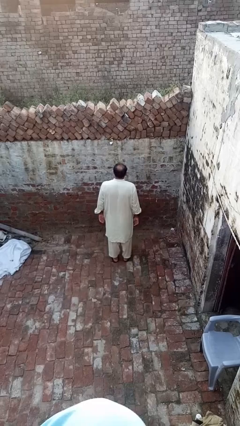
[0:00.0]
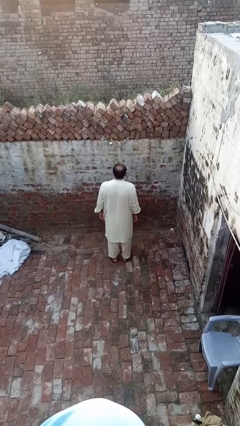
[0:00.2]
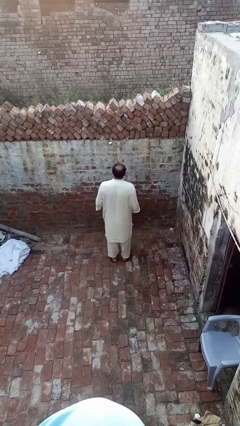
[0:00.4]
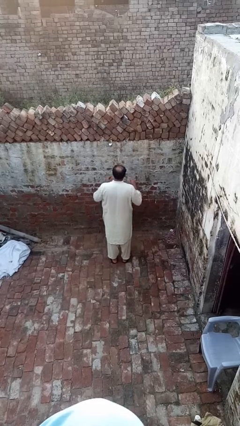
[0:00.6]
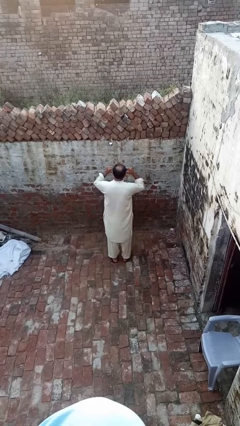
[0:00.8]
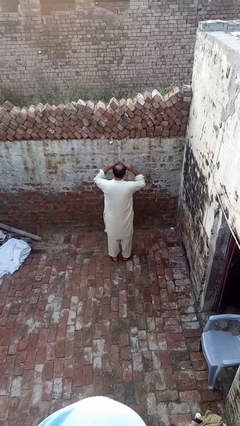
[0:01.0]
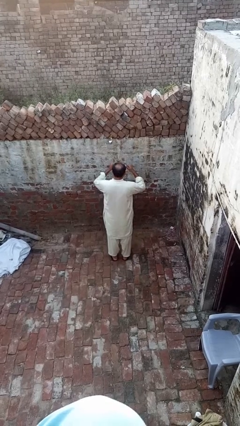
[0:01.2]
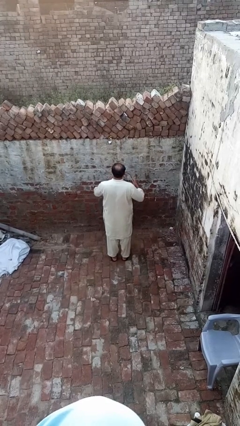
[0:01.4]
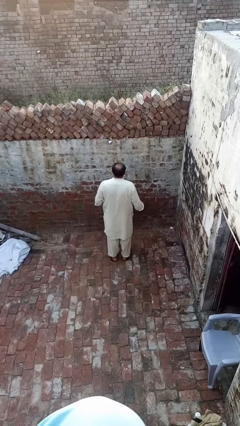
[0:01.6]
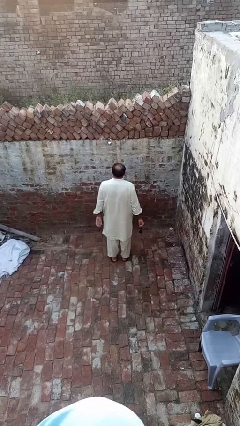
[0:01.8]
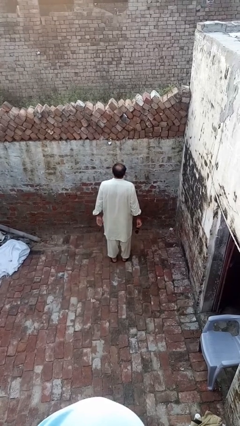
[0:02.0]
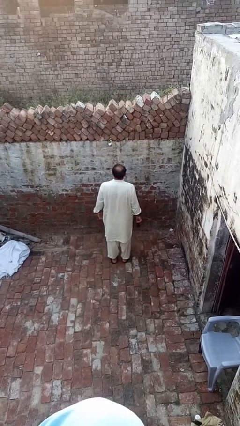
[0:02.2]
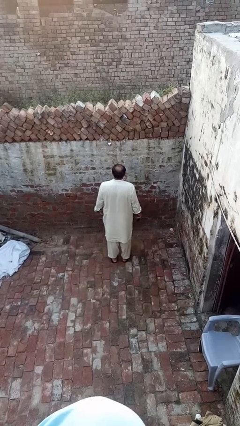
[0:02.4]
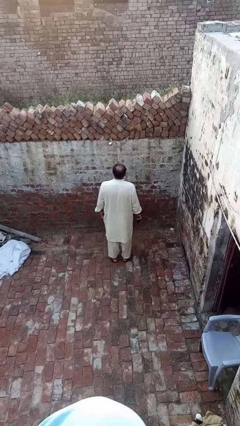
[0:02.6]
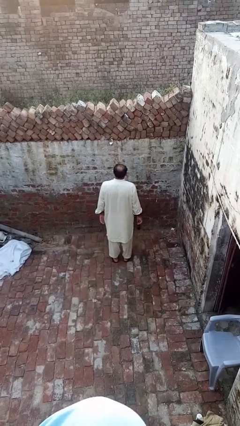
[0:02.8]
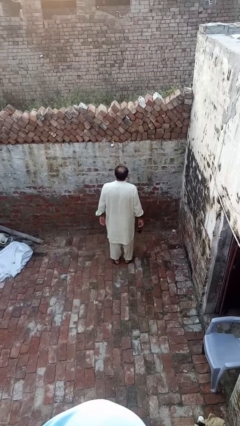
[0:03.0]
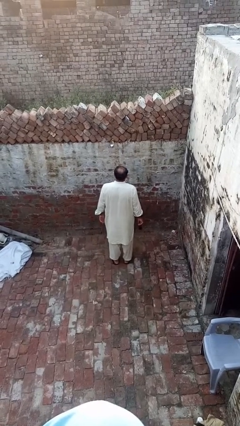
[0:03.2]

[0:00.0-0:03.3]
person takes off sunglasses

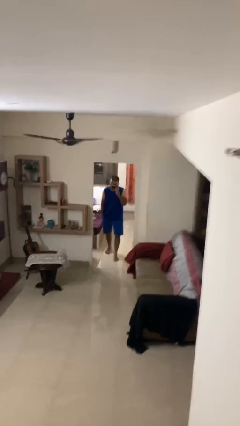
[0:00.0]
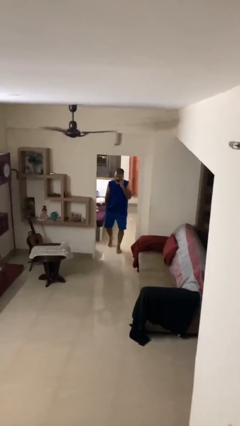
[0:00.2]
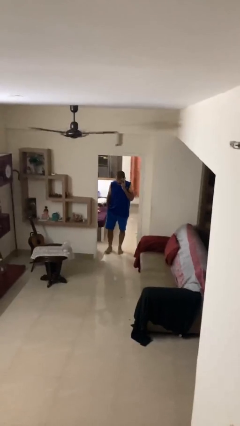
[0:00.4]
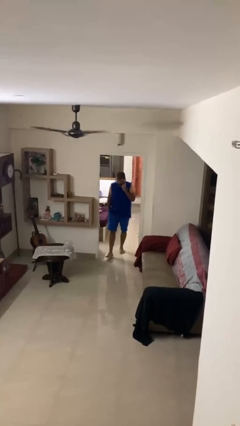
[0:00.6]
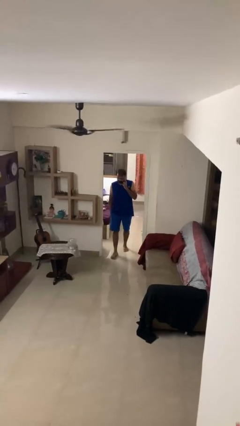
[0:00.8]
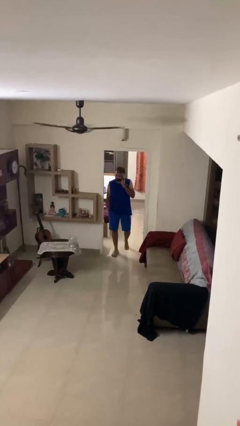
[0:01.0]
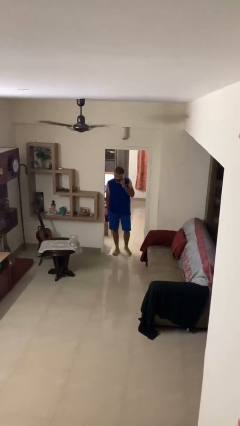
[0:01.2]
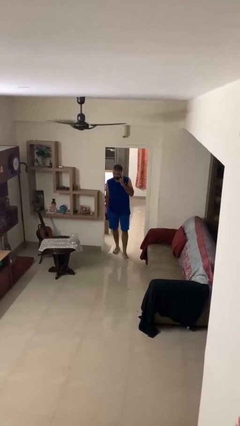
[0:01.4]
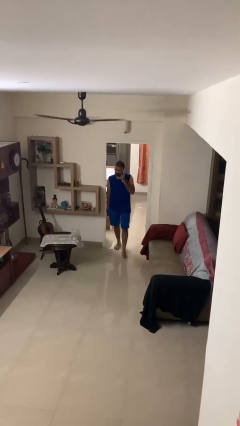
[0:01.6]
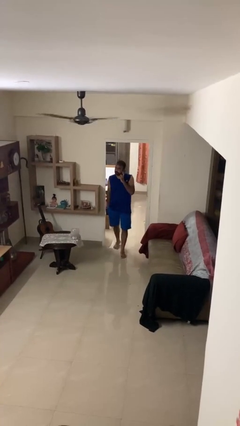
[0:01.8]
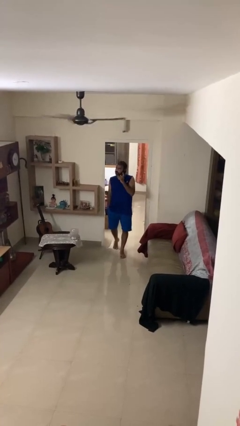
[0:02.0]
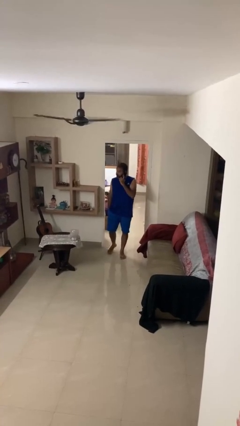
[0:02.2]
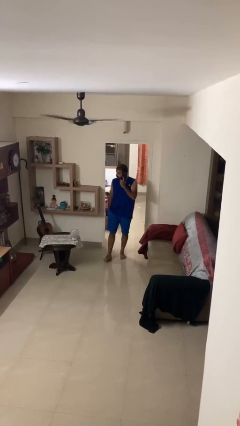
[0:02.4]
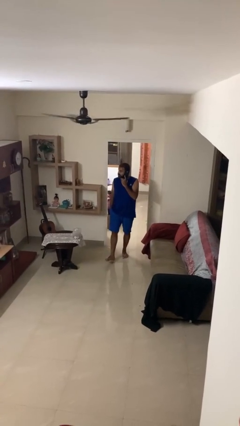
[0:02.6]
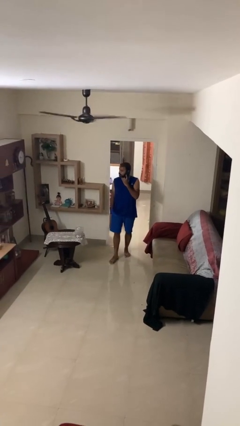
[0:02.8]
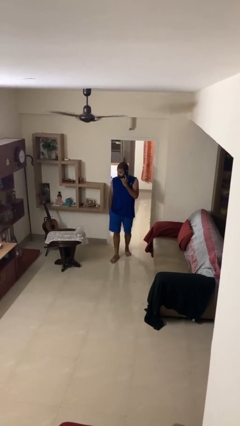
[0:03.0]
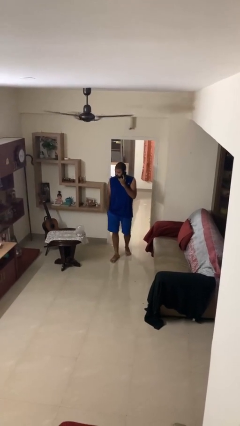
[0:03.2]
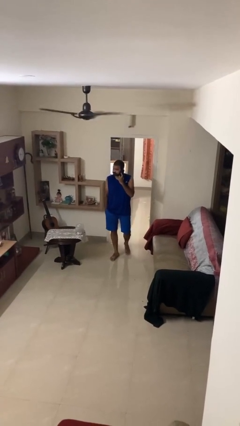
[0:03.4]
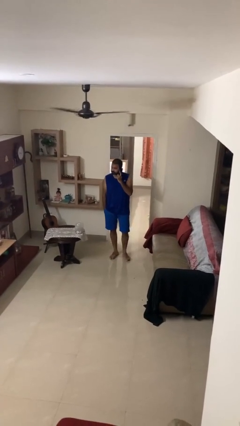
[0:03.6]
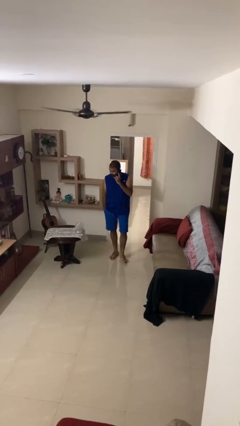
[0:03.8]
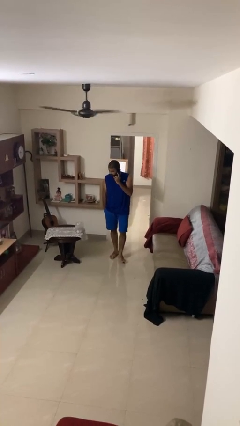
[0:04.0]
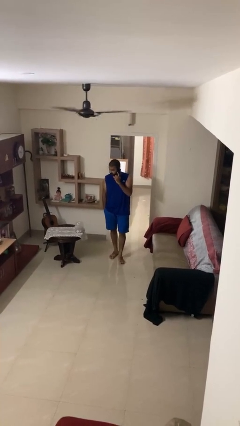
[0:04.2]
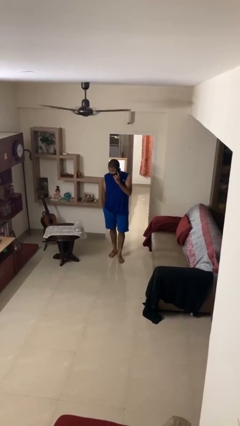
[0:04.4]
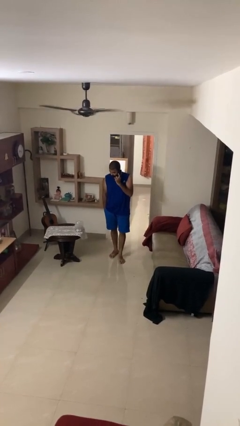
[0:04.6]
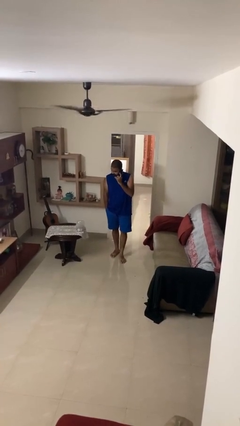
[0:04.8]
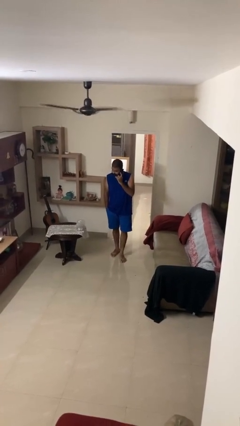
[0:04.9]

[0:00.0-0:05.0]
person enters scene through structure

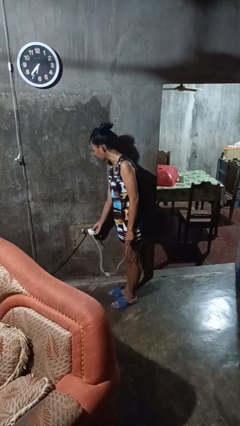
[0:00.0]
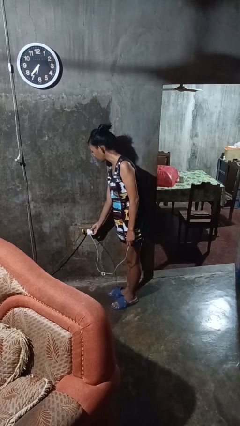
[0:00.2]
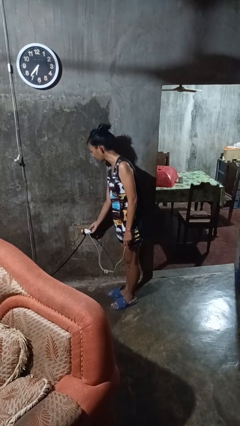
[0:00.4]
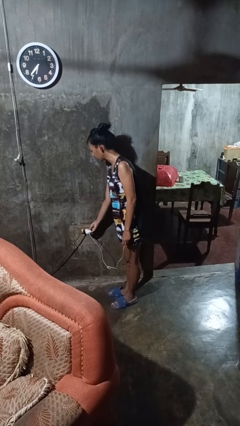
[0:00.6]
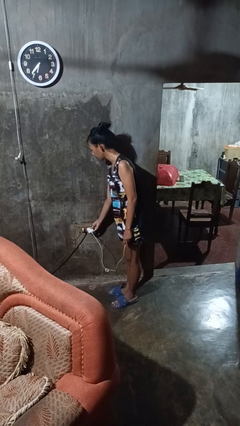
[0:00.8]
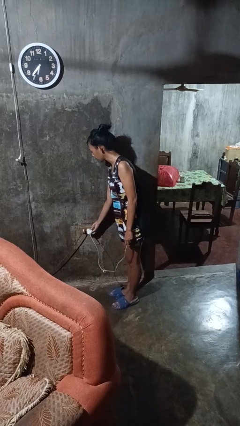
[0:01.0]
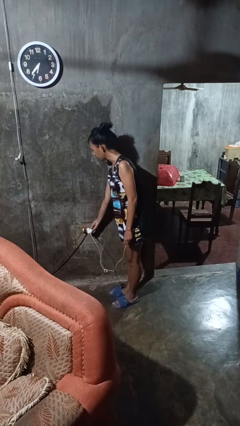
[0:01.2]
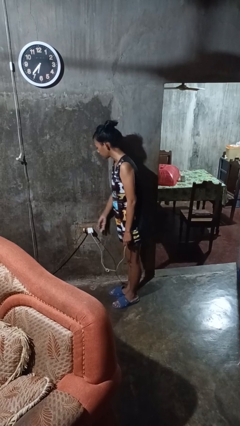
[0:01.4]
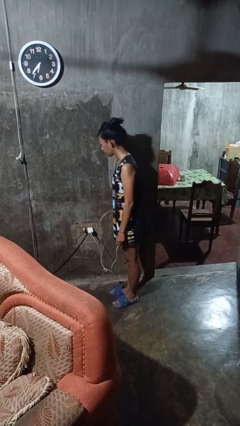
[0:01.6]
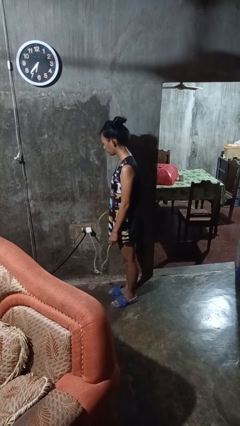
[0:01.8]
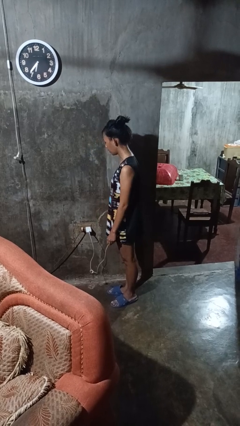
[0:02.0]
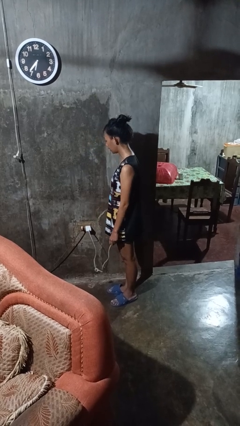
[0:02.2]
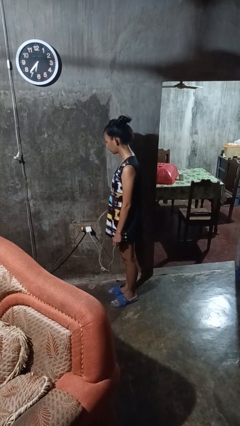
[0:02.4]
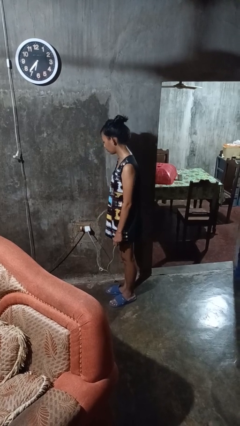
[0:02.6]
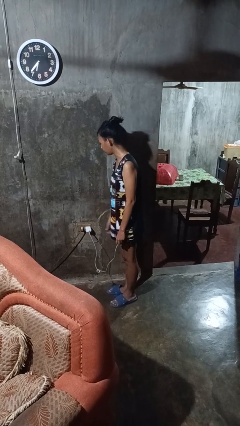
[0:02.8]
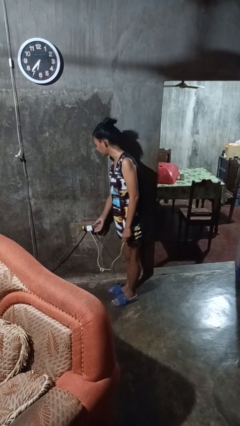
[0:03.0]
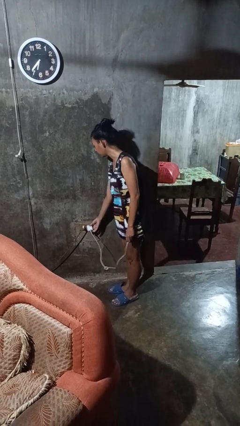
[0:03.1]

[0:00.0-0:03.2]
person plugs into electrical socket

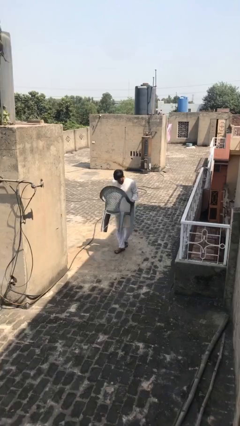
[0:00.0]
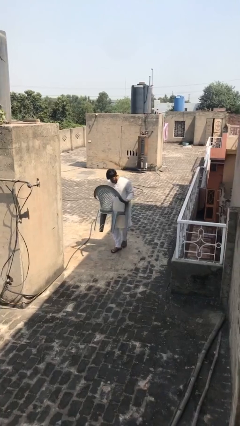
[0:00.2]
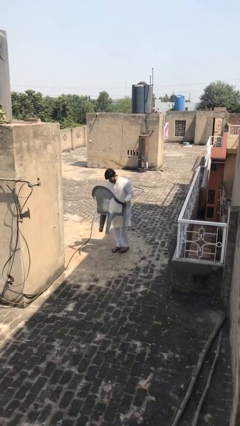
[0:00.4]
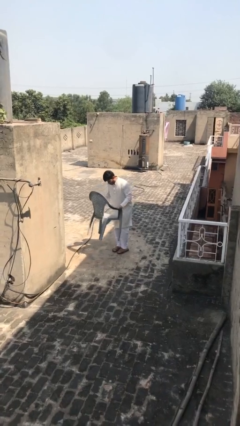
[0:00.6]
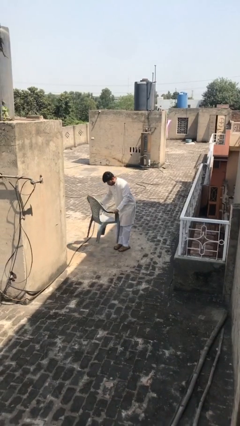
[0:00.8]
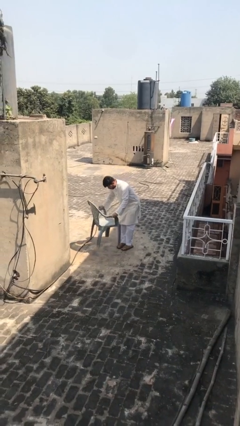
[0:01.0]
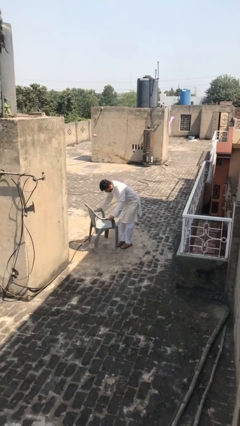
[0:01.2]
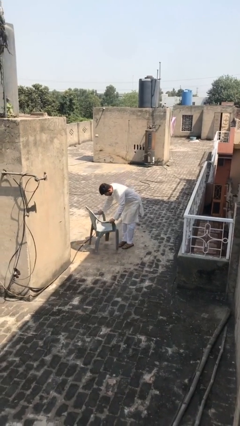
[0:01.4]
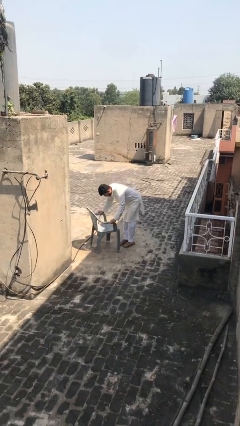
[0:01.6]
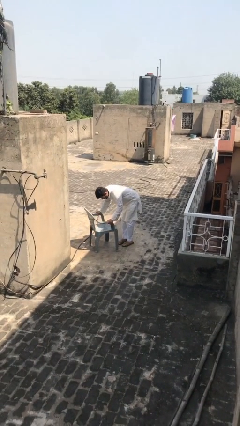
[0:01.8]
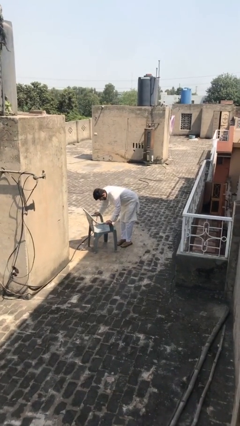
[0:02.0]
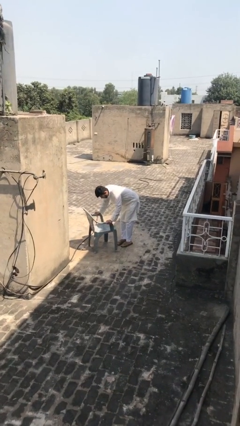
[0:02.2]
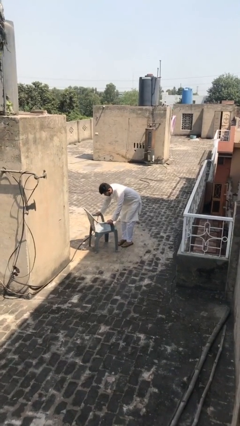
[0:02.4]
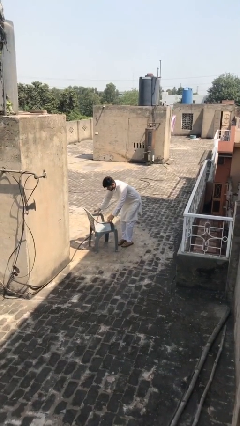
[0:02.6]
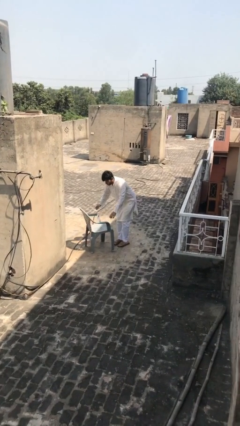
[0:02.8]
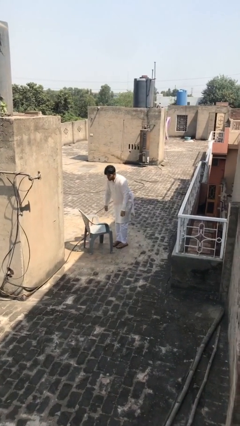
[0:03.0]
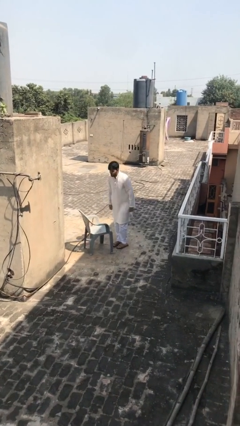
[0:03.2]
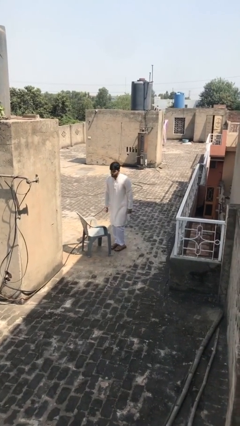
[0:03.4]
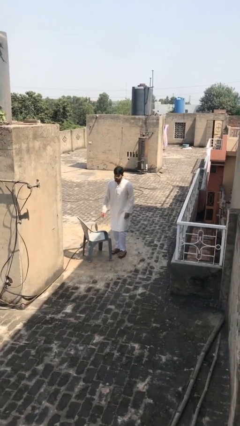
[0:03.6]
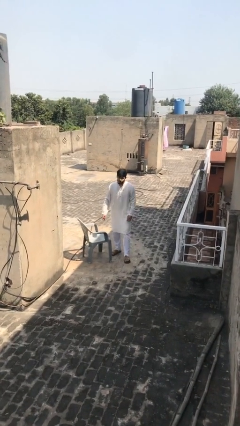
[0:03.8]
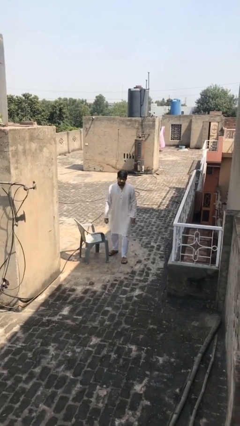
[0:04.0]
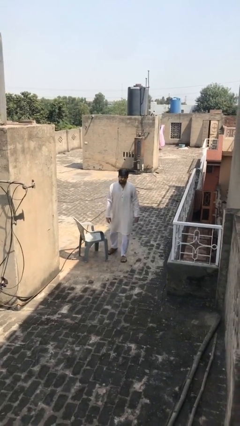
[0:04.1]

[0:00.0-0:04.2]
person puts down object on floor

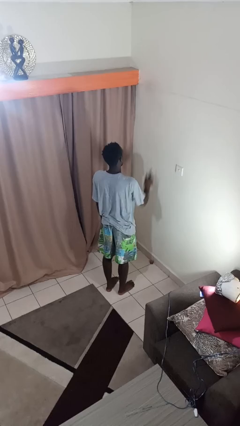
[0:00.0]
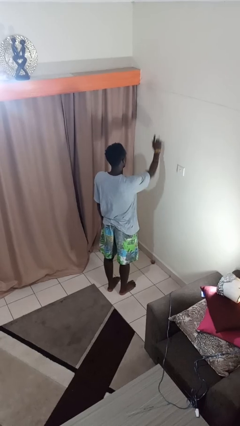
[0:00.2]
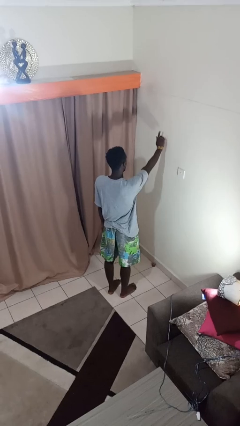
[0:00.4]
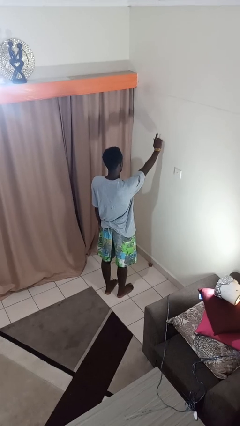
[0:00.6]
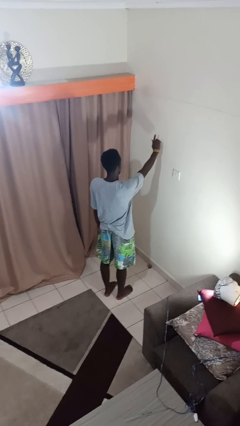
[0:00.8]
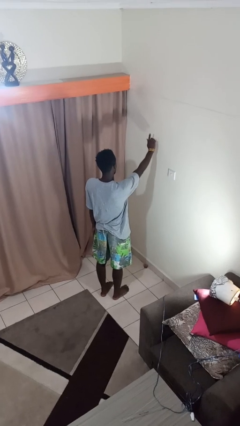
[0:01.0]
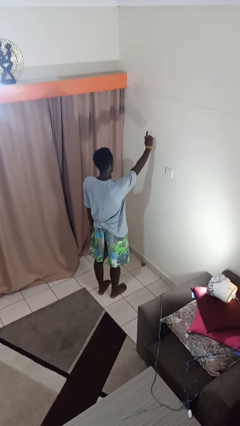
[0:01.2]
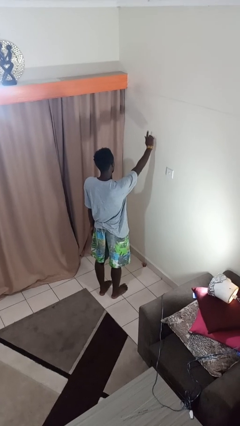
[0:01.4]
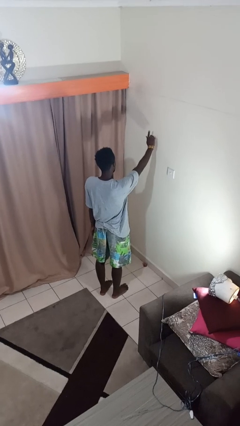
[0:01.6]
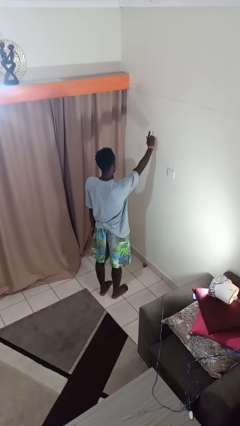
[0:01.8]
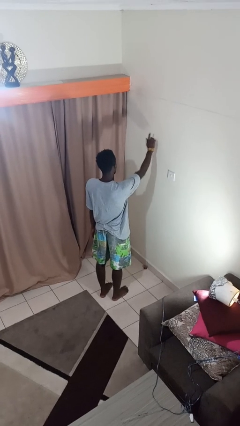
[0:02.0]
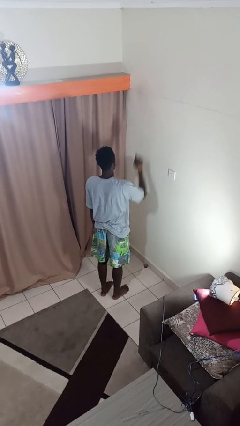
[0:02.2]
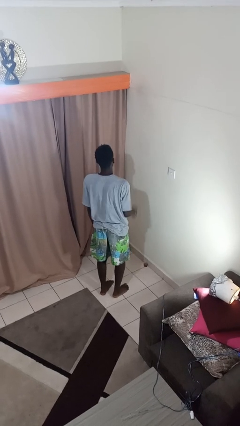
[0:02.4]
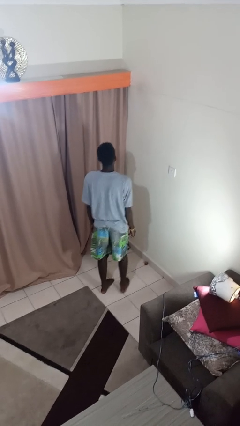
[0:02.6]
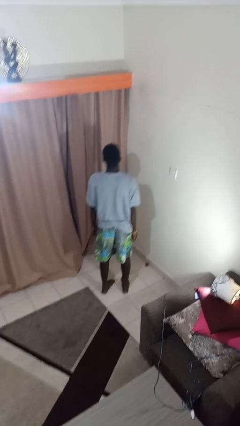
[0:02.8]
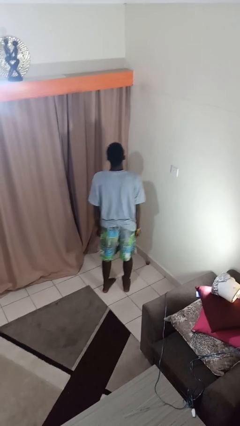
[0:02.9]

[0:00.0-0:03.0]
person gestures number one
